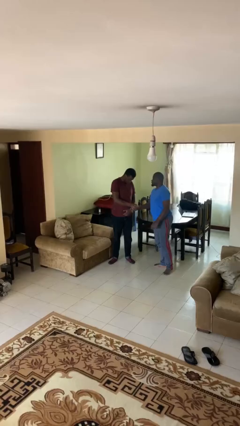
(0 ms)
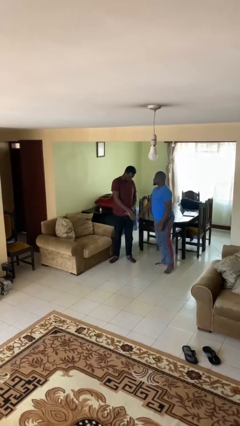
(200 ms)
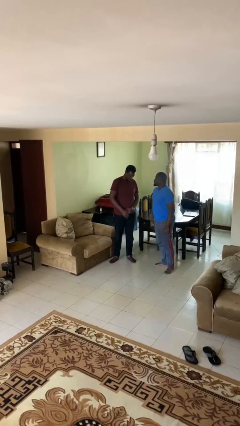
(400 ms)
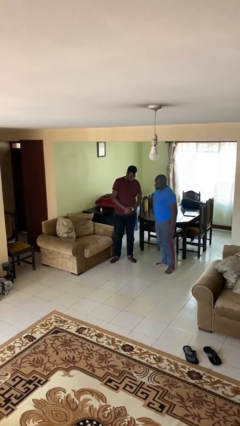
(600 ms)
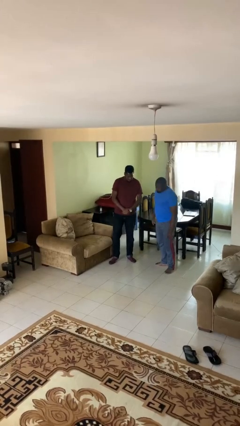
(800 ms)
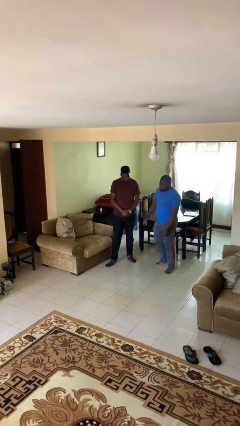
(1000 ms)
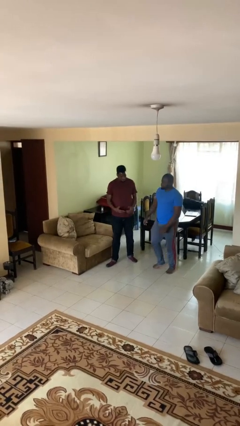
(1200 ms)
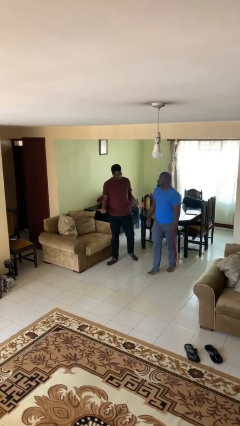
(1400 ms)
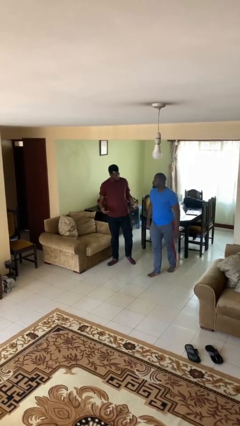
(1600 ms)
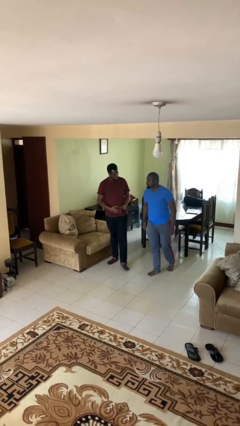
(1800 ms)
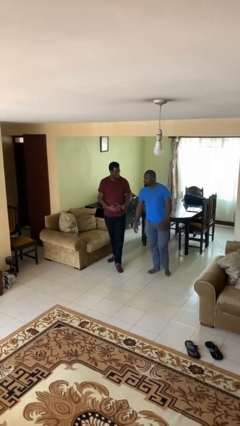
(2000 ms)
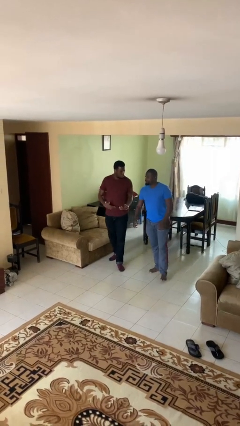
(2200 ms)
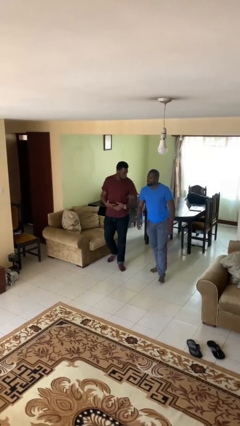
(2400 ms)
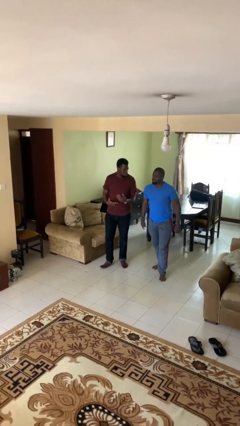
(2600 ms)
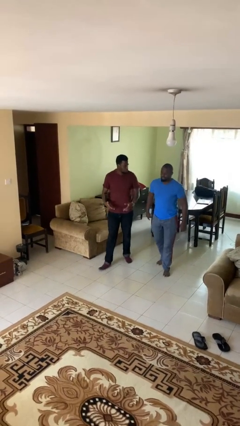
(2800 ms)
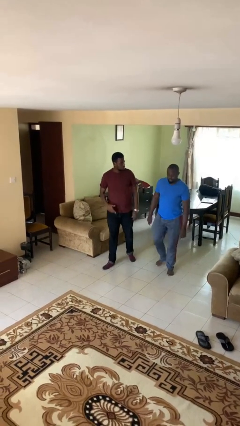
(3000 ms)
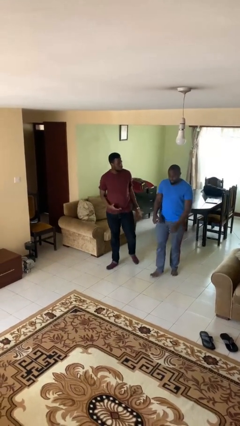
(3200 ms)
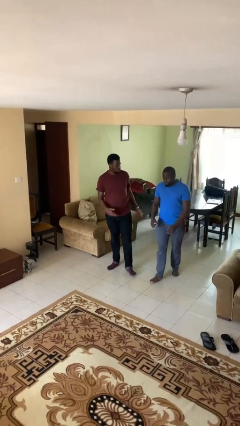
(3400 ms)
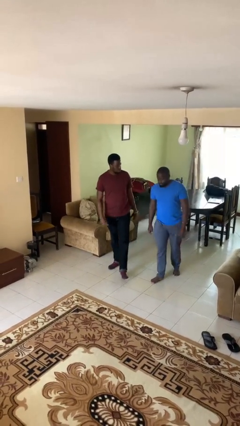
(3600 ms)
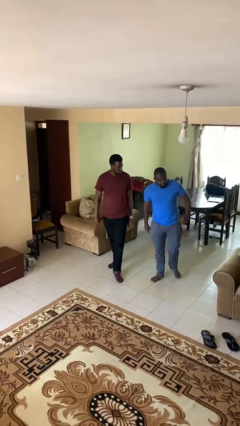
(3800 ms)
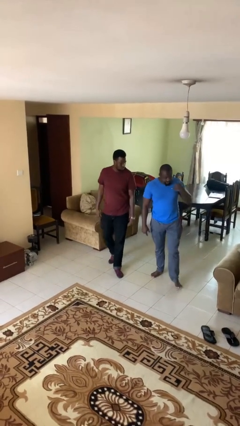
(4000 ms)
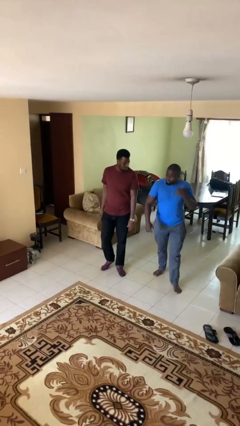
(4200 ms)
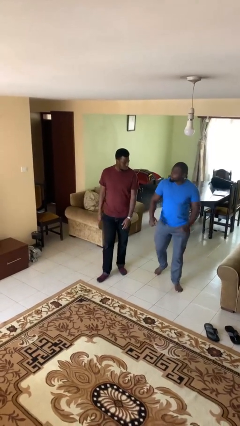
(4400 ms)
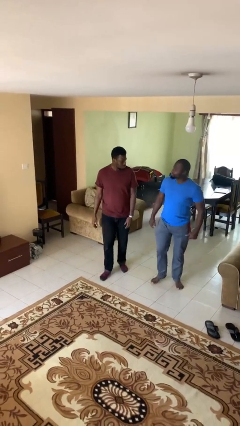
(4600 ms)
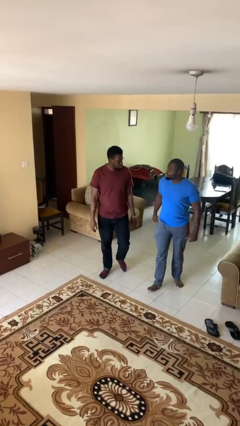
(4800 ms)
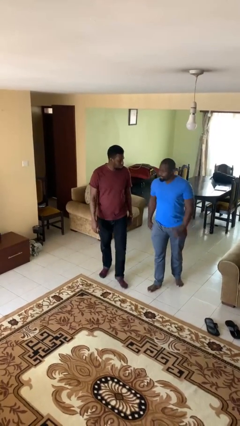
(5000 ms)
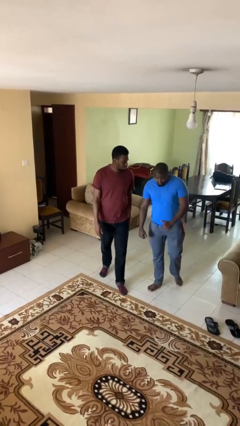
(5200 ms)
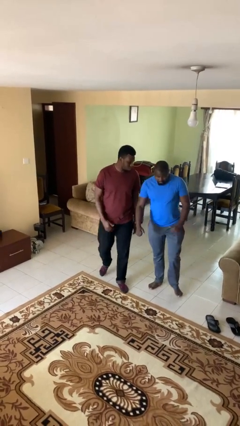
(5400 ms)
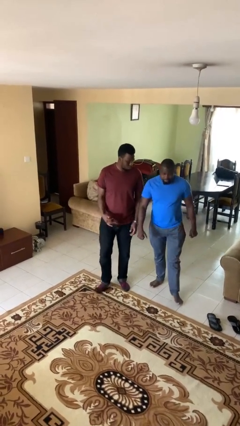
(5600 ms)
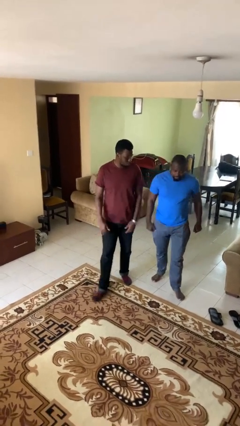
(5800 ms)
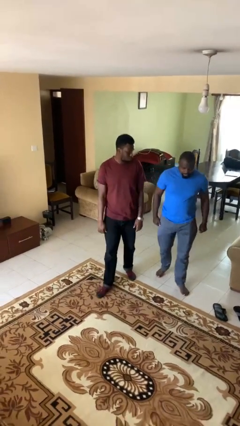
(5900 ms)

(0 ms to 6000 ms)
person talks to person

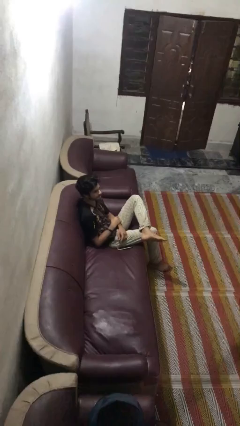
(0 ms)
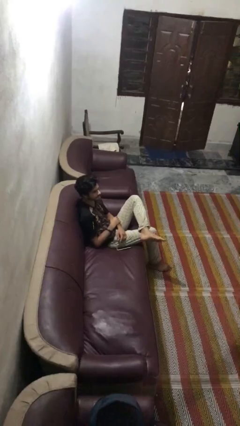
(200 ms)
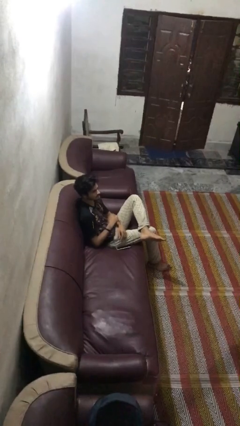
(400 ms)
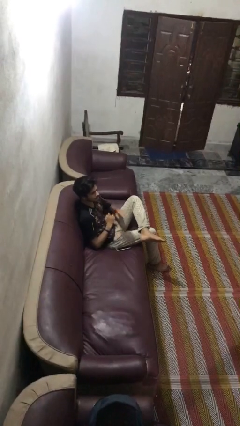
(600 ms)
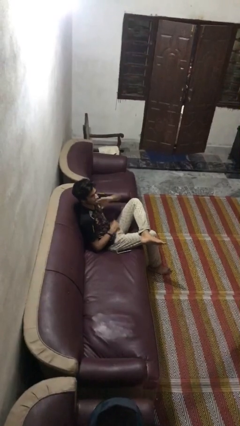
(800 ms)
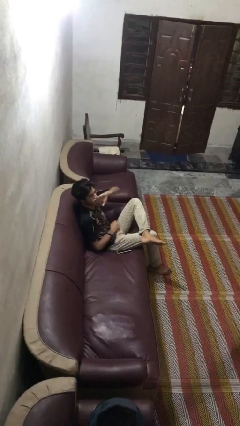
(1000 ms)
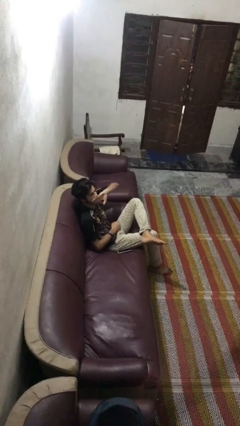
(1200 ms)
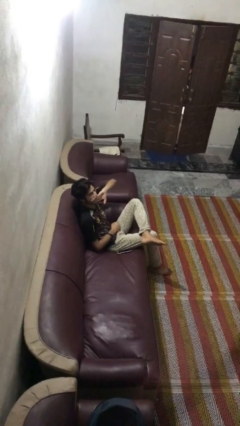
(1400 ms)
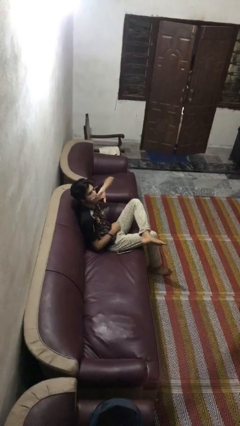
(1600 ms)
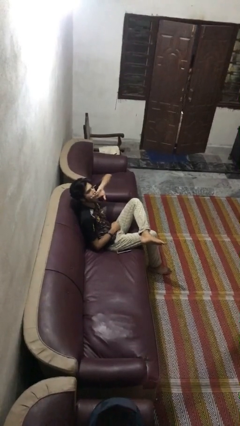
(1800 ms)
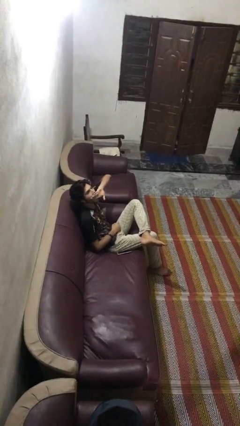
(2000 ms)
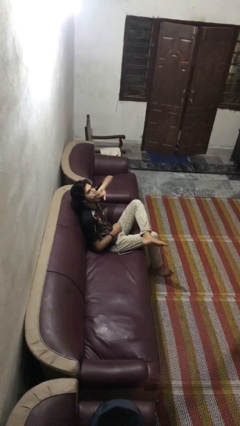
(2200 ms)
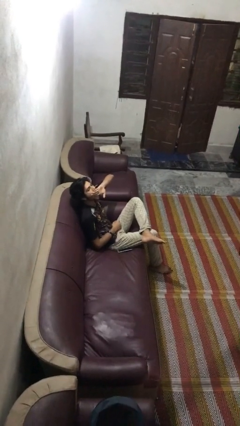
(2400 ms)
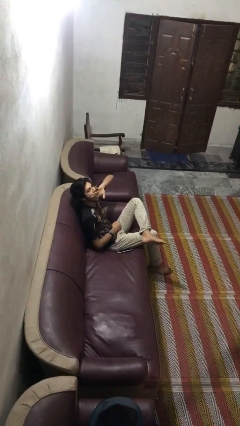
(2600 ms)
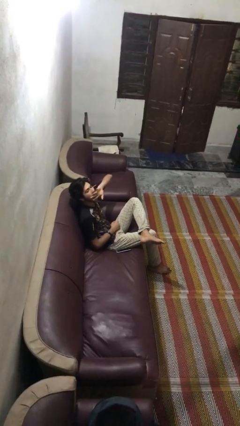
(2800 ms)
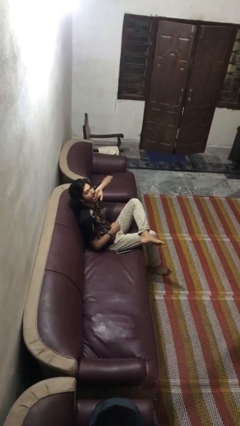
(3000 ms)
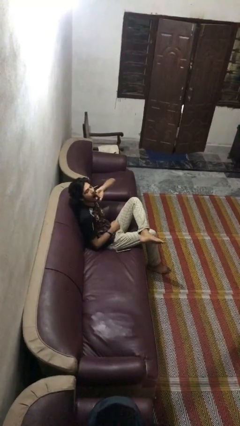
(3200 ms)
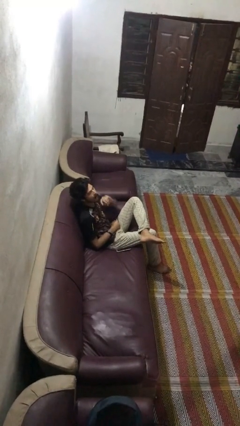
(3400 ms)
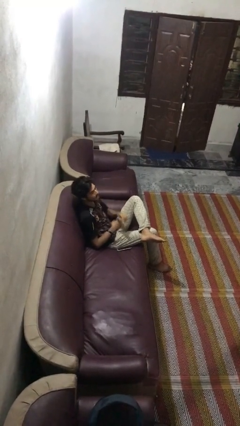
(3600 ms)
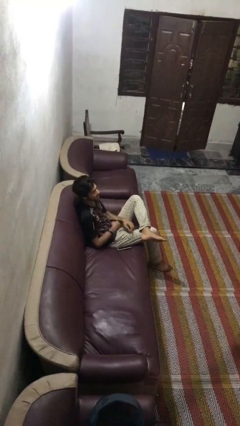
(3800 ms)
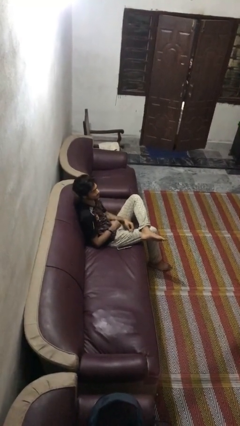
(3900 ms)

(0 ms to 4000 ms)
person yawns

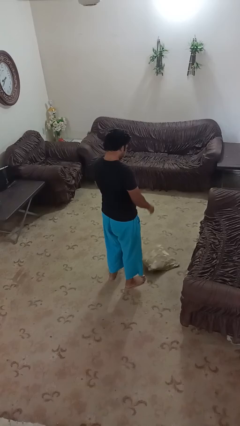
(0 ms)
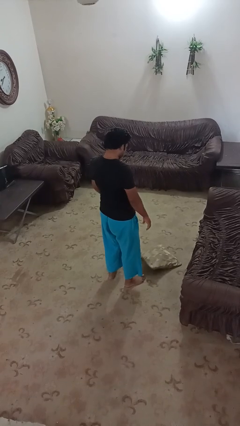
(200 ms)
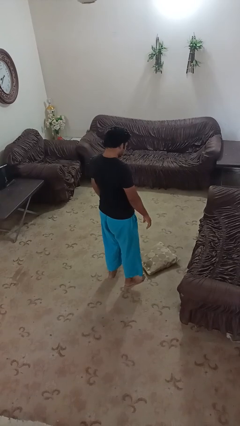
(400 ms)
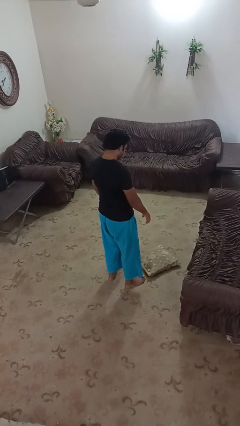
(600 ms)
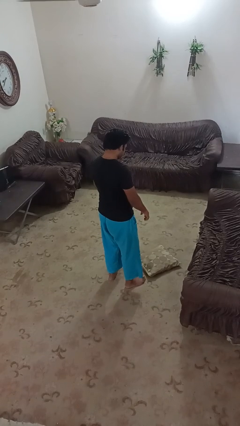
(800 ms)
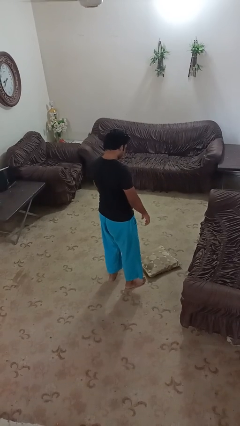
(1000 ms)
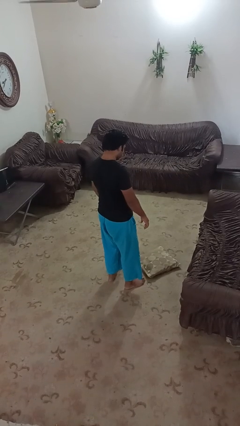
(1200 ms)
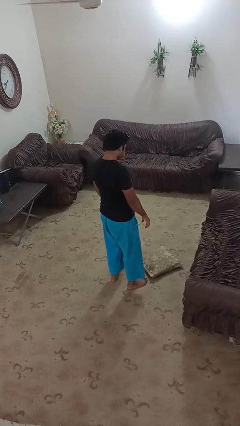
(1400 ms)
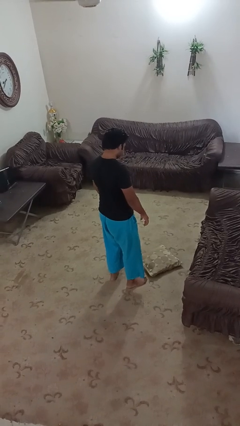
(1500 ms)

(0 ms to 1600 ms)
person drops object

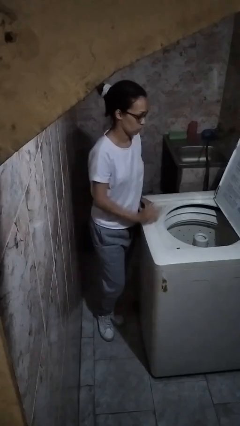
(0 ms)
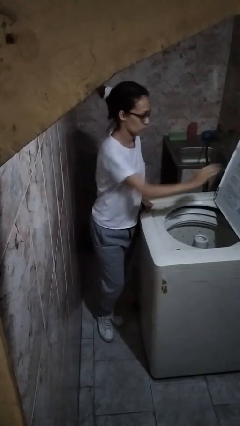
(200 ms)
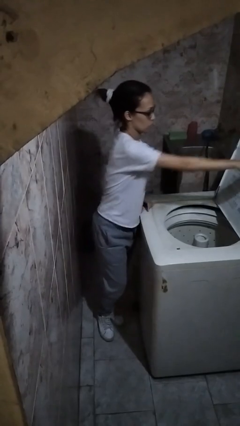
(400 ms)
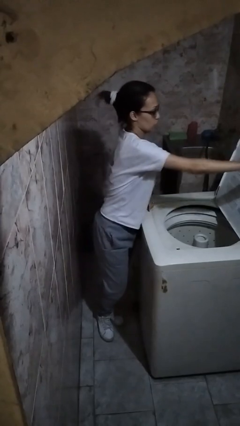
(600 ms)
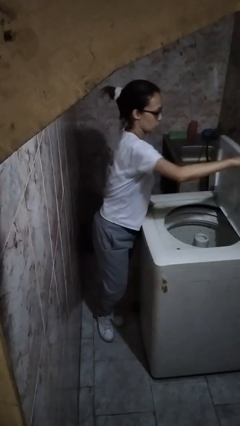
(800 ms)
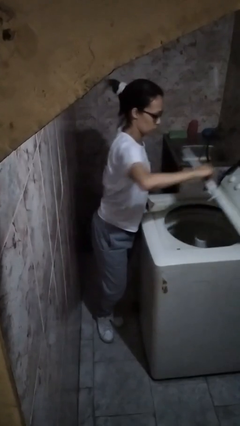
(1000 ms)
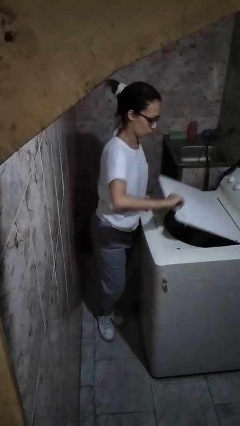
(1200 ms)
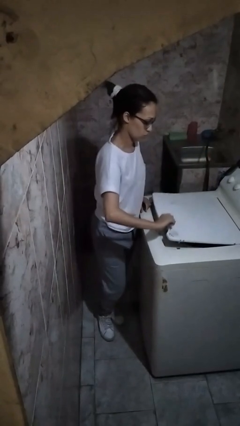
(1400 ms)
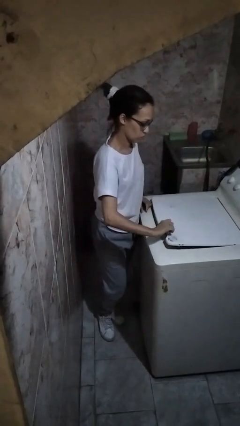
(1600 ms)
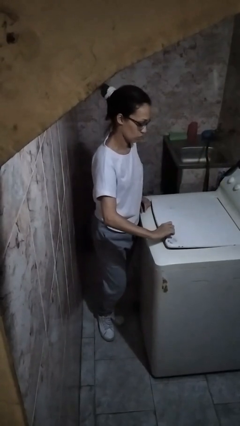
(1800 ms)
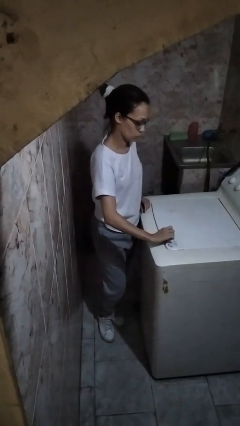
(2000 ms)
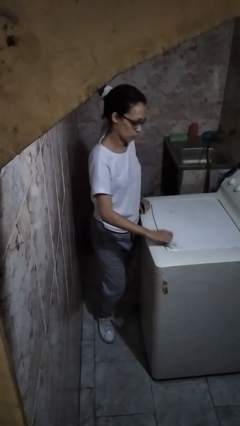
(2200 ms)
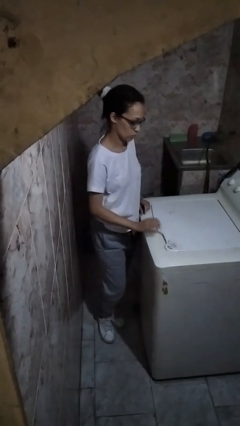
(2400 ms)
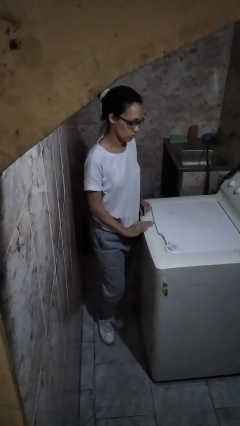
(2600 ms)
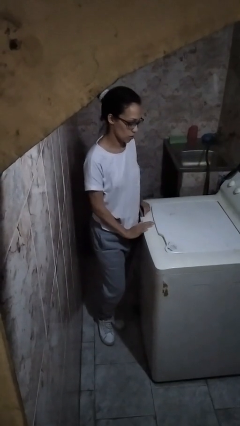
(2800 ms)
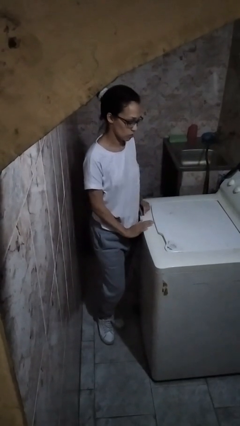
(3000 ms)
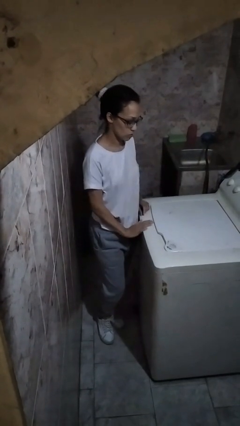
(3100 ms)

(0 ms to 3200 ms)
person closes clothes washer

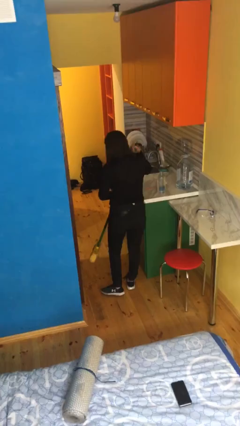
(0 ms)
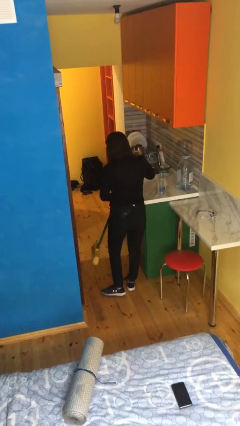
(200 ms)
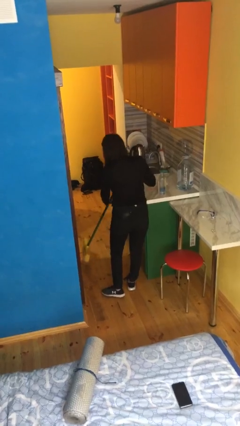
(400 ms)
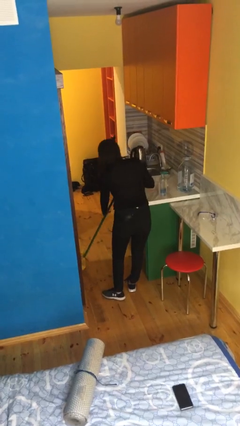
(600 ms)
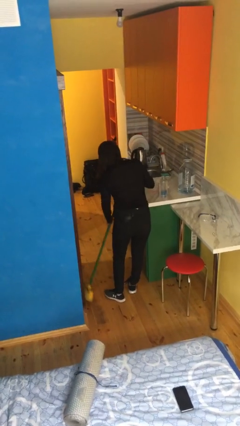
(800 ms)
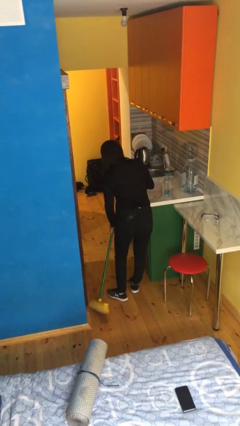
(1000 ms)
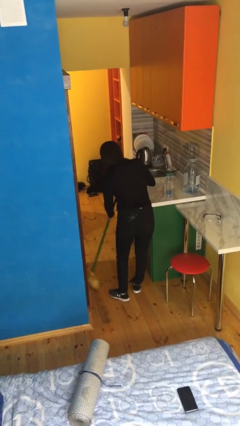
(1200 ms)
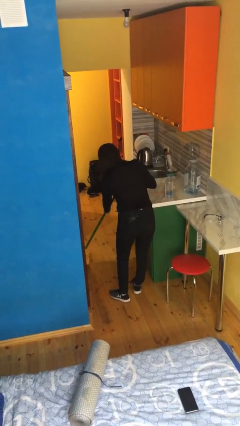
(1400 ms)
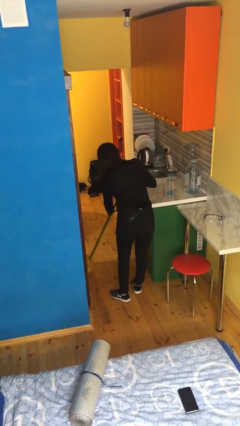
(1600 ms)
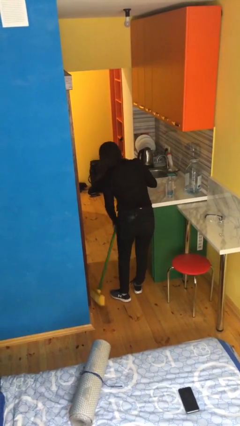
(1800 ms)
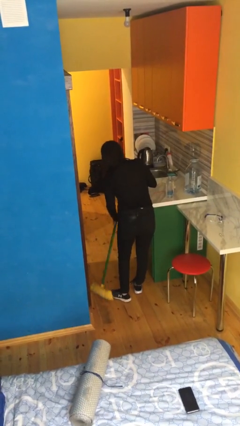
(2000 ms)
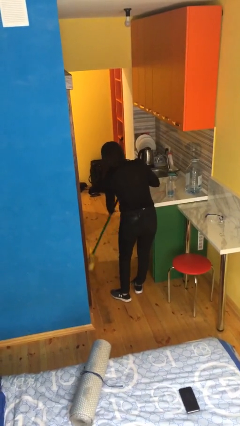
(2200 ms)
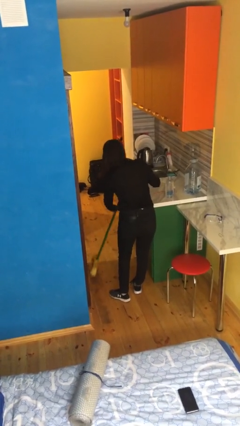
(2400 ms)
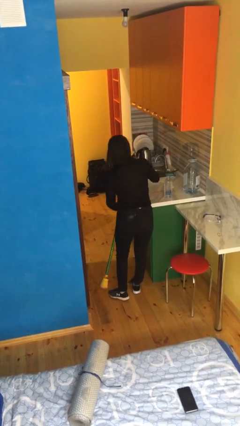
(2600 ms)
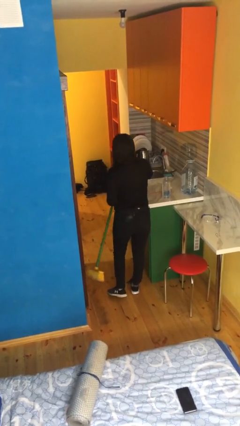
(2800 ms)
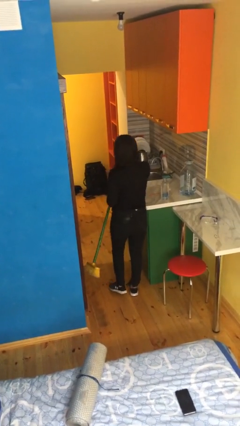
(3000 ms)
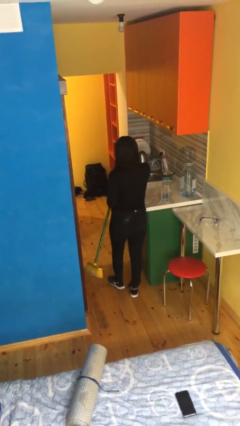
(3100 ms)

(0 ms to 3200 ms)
person sweeps floor
